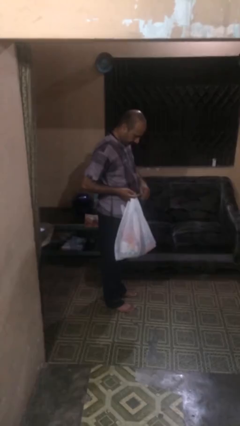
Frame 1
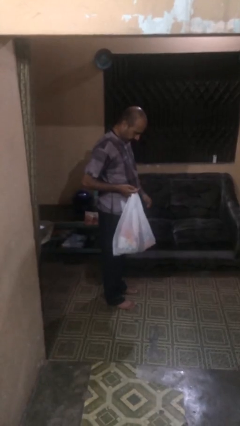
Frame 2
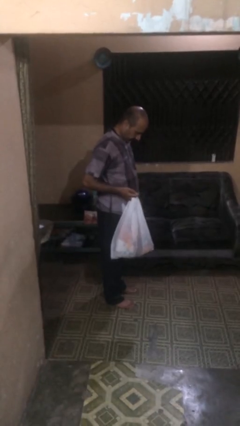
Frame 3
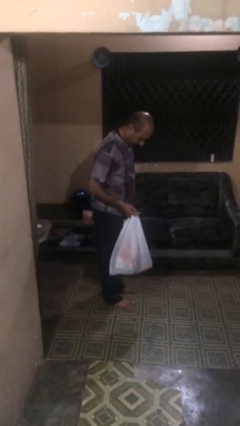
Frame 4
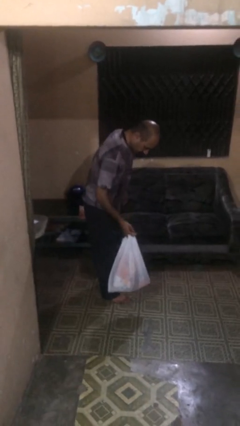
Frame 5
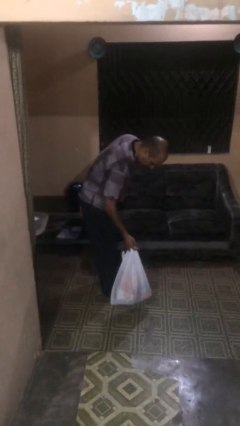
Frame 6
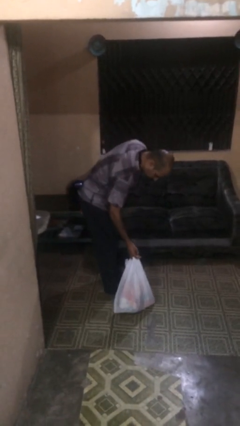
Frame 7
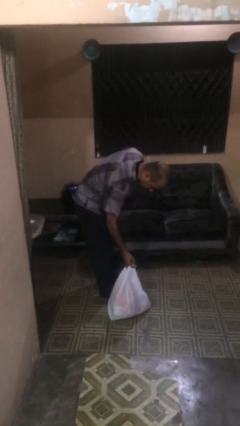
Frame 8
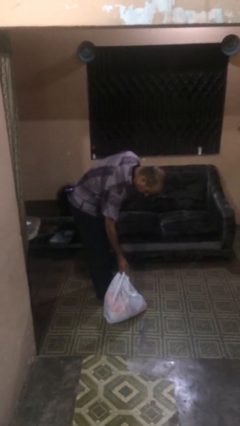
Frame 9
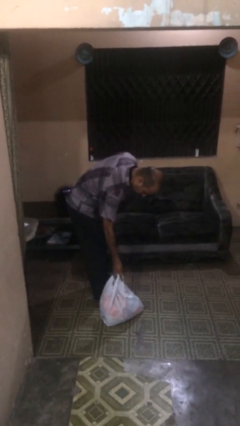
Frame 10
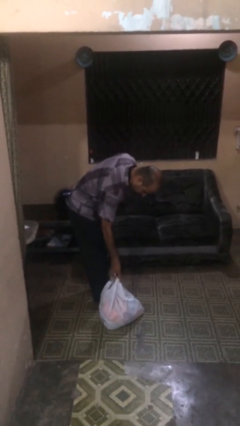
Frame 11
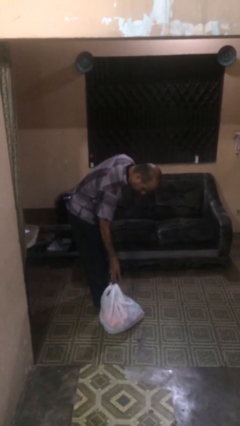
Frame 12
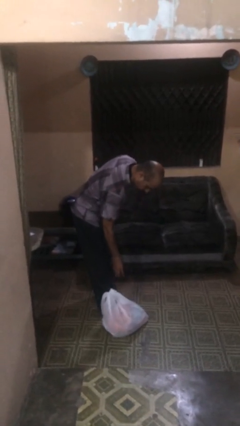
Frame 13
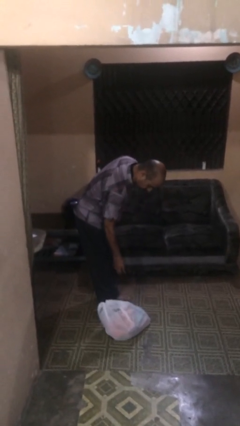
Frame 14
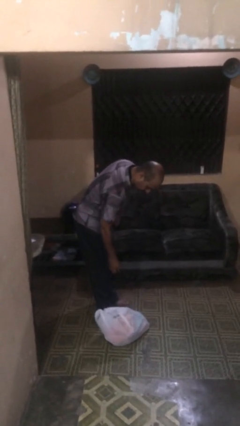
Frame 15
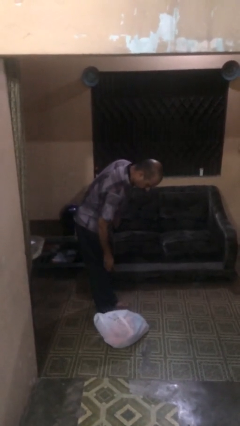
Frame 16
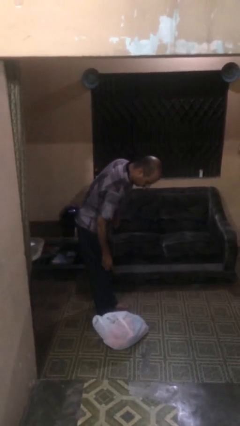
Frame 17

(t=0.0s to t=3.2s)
person puts down object on floor

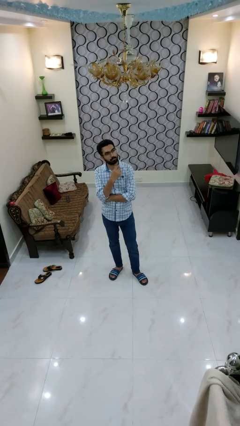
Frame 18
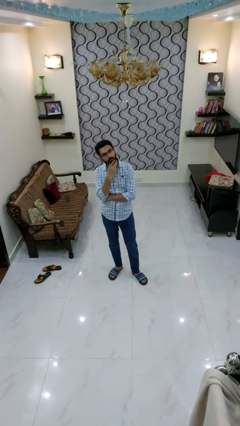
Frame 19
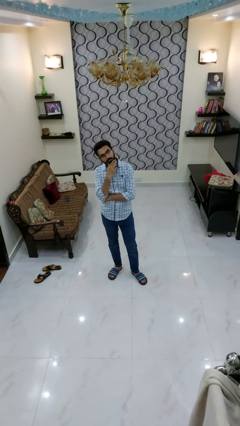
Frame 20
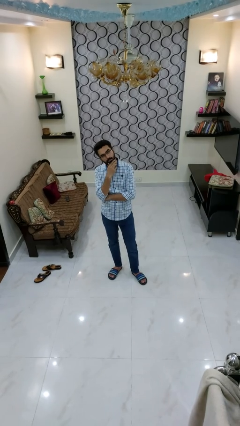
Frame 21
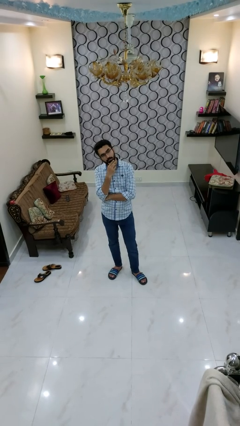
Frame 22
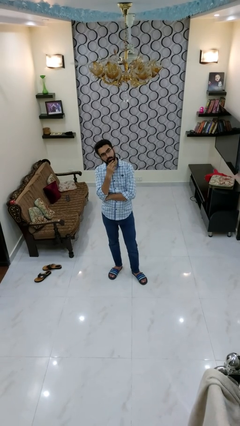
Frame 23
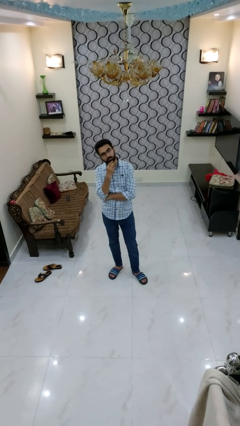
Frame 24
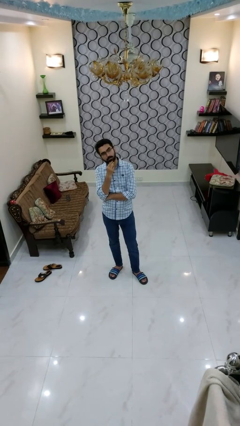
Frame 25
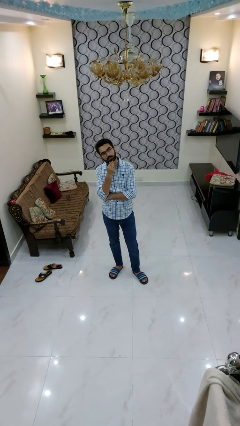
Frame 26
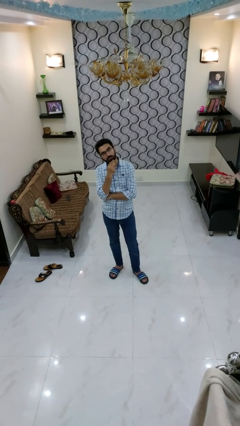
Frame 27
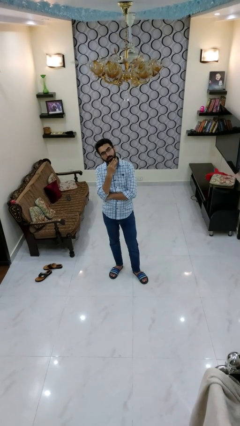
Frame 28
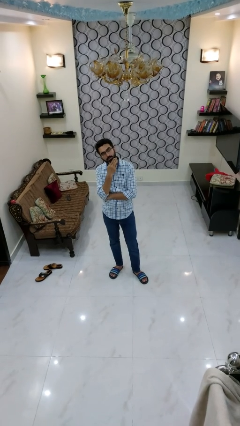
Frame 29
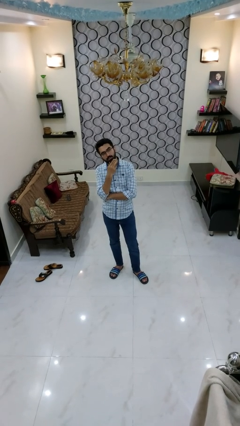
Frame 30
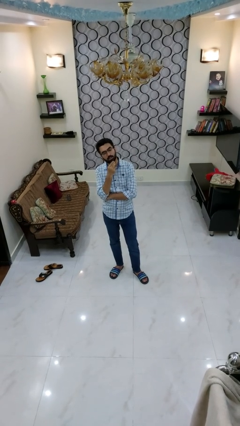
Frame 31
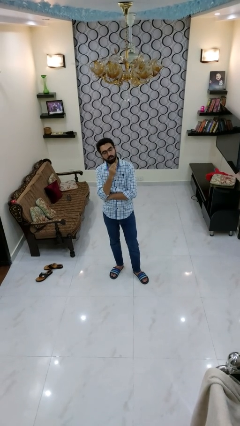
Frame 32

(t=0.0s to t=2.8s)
person strokes chin

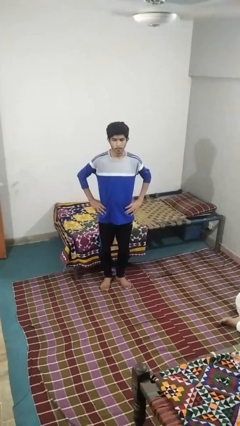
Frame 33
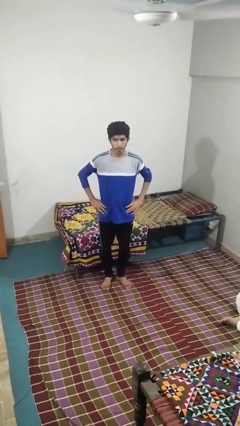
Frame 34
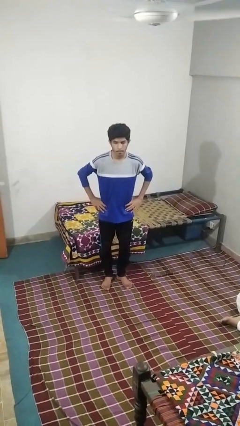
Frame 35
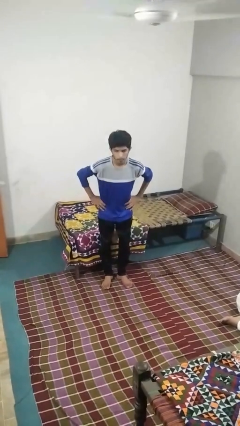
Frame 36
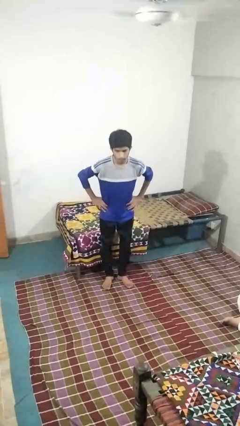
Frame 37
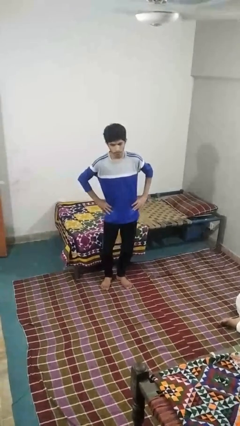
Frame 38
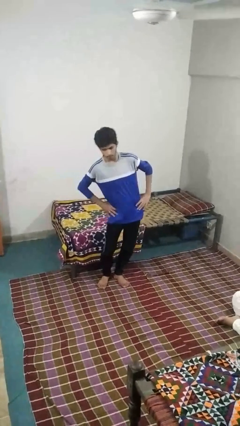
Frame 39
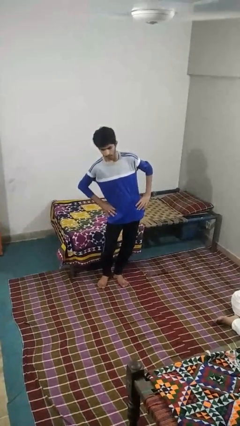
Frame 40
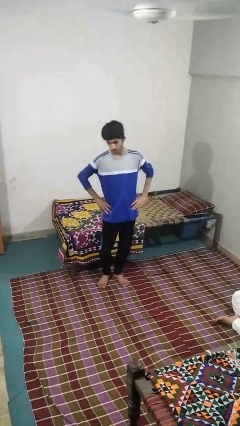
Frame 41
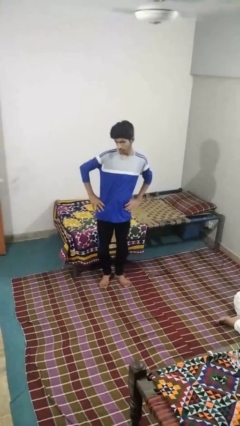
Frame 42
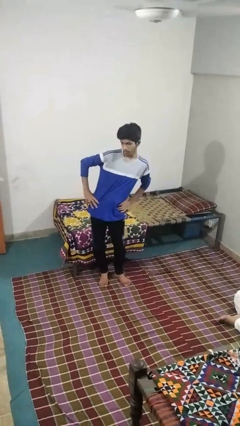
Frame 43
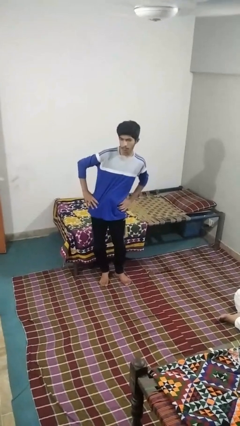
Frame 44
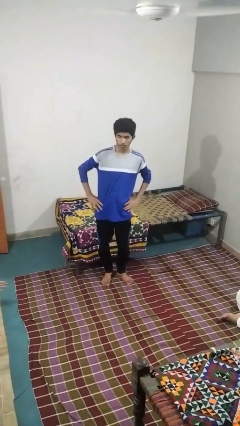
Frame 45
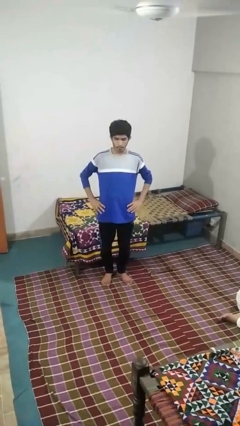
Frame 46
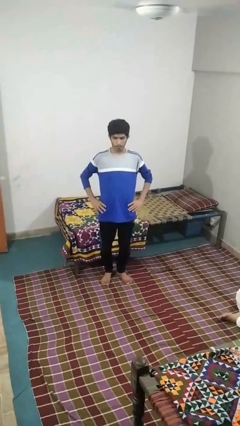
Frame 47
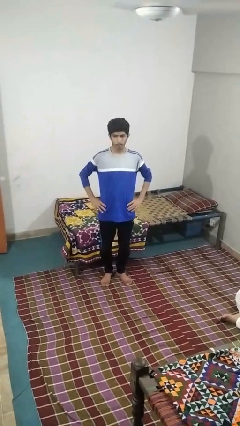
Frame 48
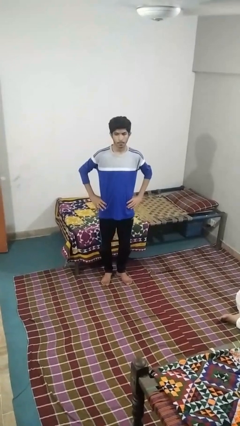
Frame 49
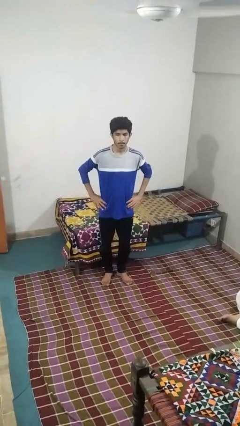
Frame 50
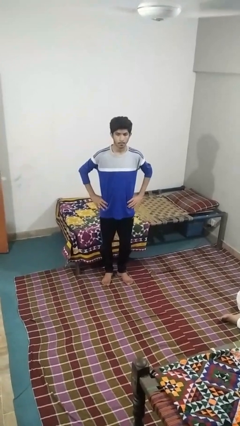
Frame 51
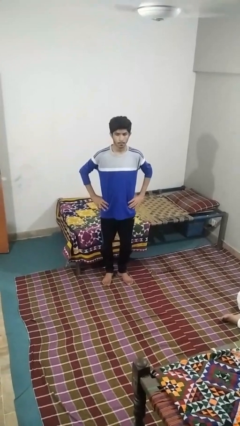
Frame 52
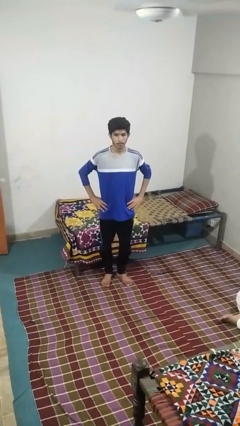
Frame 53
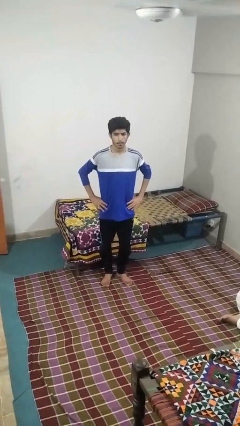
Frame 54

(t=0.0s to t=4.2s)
person wiggles hips

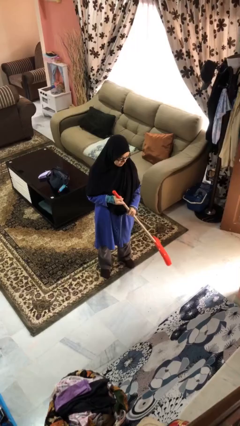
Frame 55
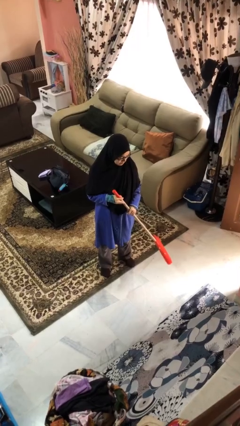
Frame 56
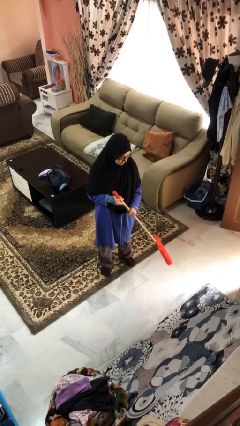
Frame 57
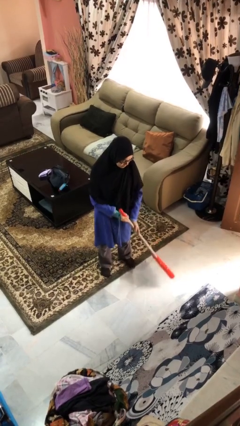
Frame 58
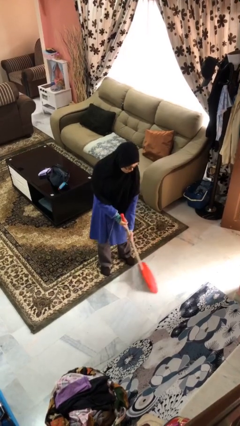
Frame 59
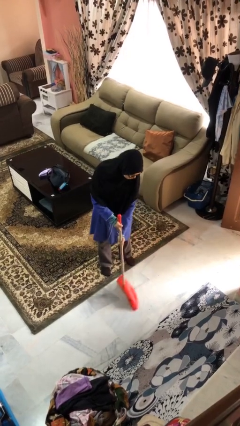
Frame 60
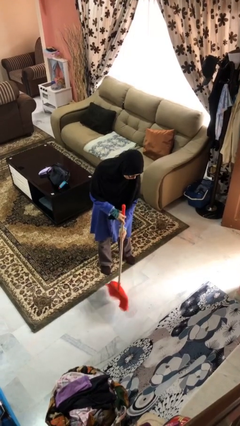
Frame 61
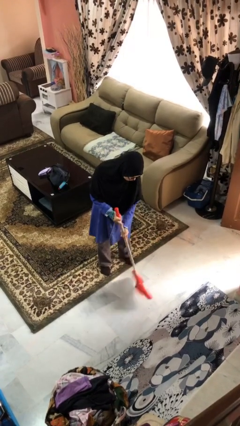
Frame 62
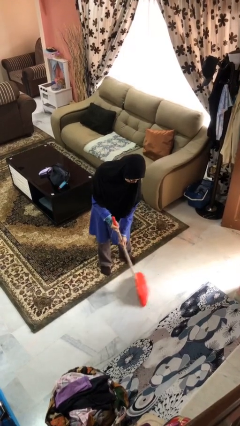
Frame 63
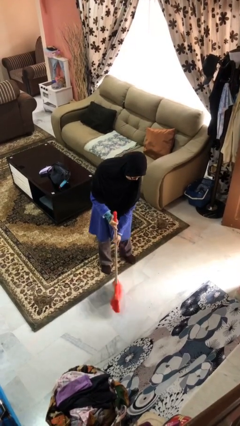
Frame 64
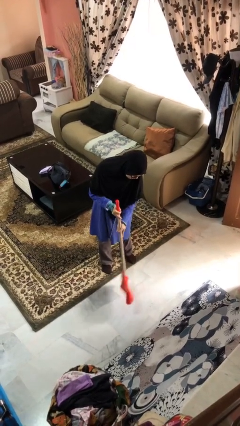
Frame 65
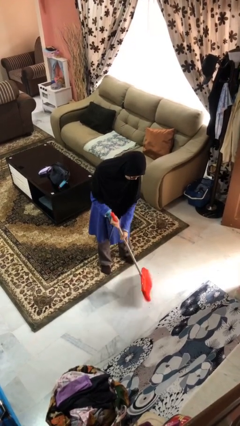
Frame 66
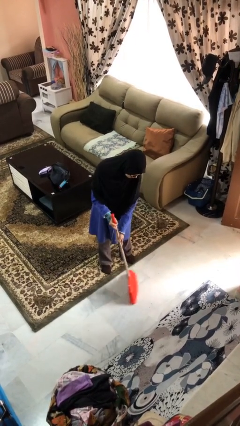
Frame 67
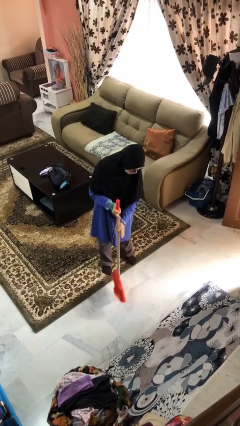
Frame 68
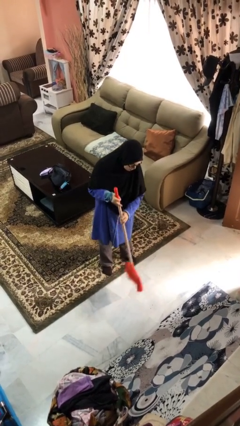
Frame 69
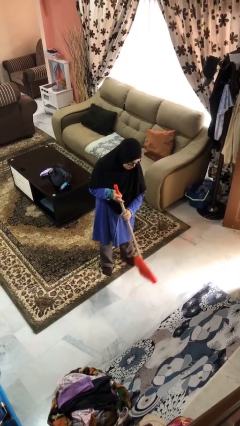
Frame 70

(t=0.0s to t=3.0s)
person sweeps floor

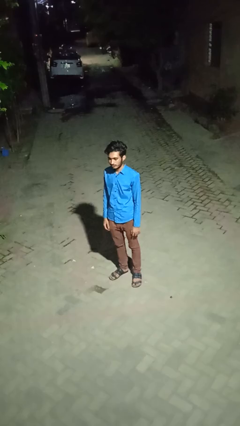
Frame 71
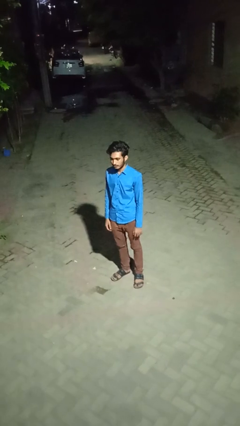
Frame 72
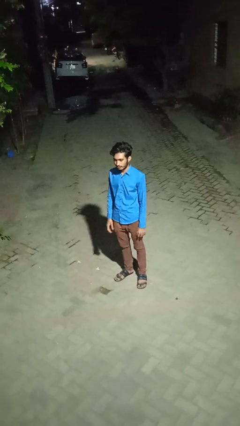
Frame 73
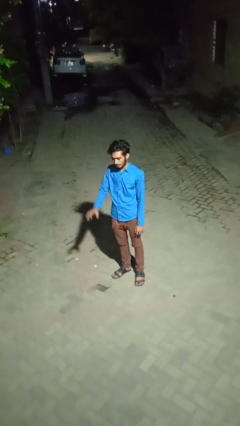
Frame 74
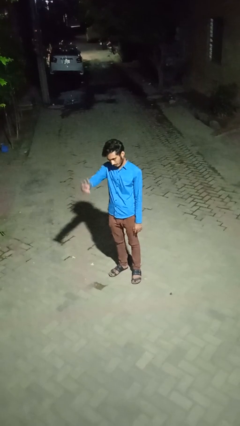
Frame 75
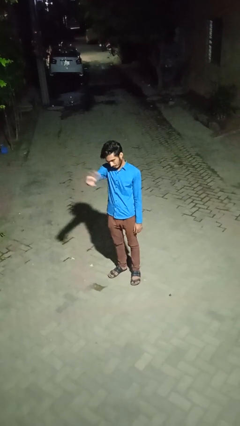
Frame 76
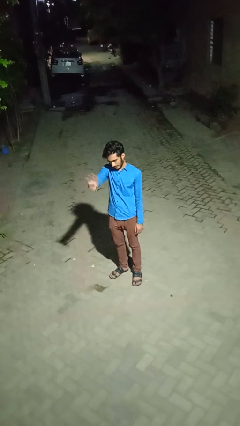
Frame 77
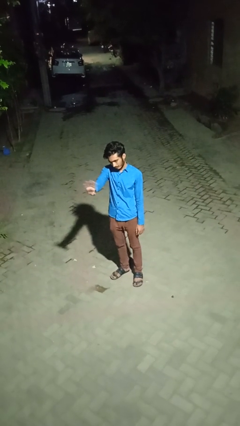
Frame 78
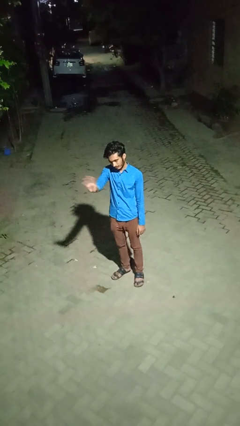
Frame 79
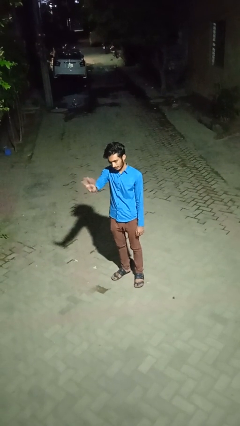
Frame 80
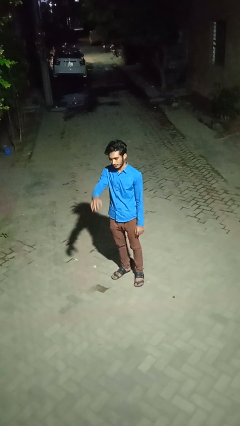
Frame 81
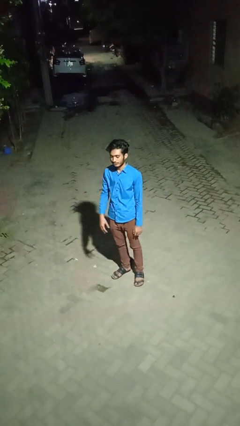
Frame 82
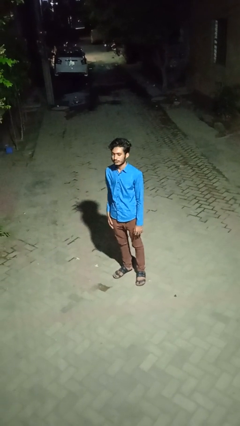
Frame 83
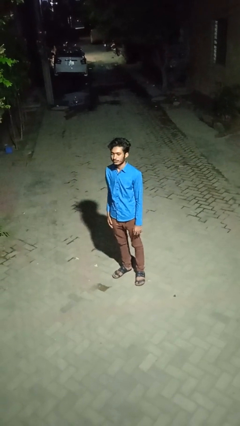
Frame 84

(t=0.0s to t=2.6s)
person waves at person

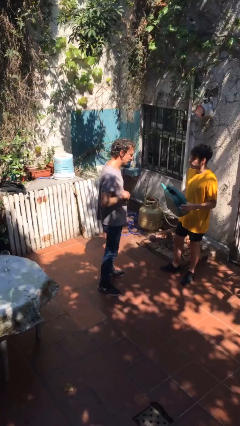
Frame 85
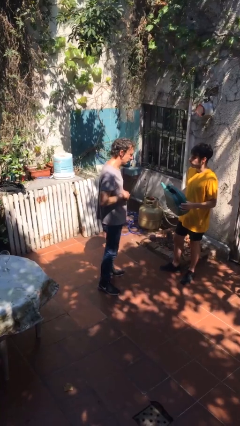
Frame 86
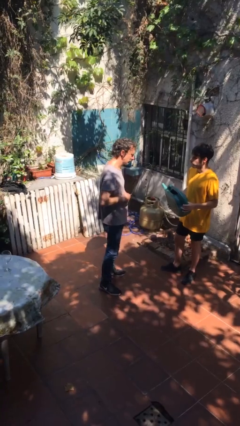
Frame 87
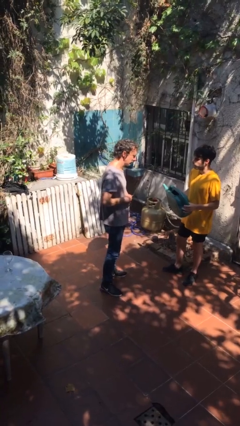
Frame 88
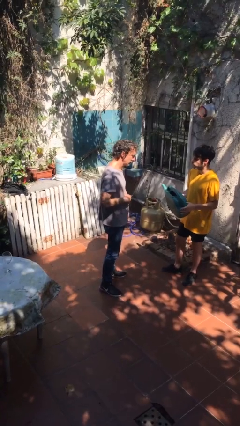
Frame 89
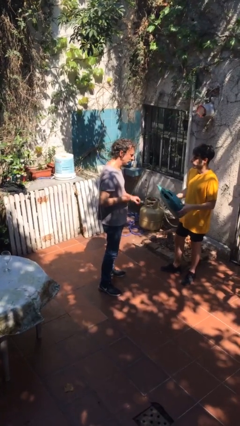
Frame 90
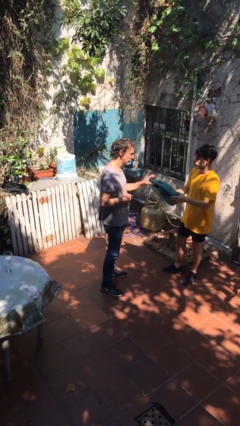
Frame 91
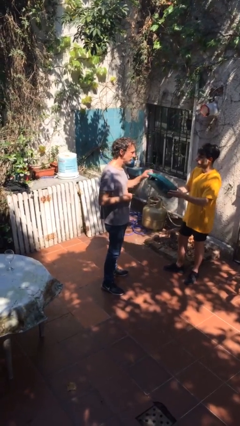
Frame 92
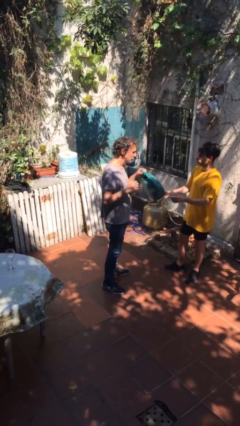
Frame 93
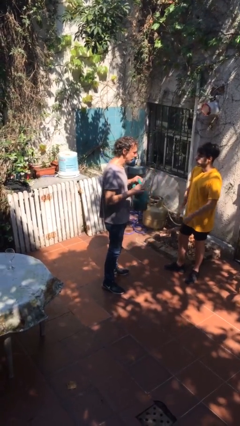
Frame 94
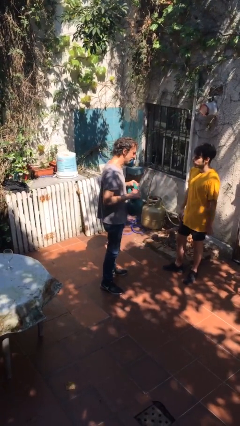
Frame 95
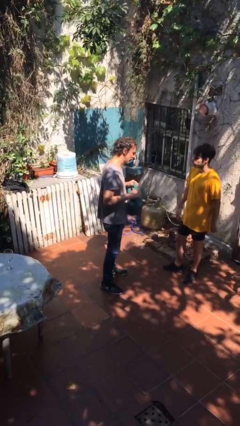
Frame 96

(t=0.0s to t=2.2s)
person transfers object to person
